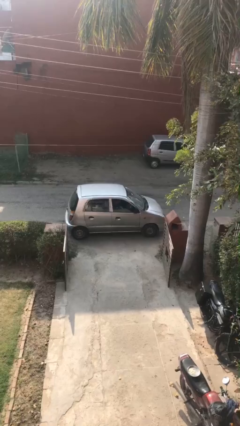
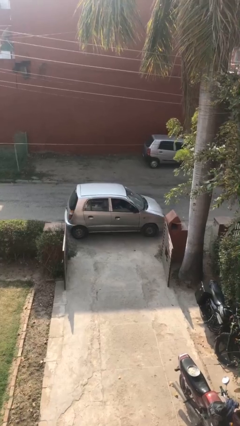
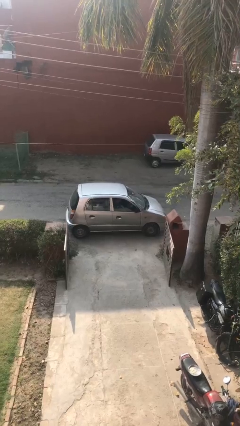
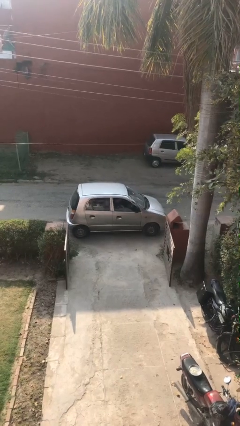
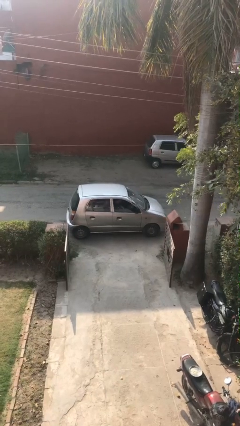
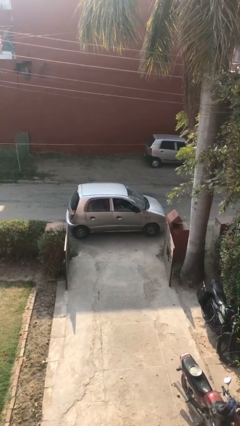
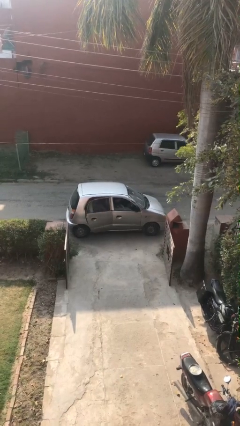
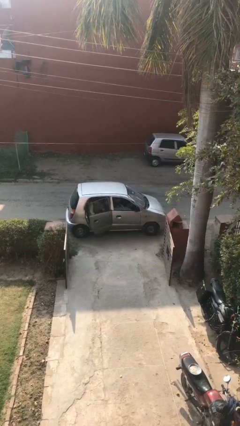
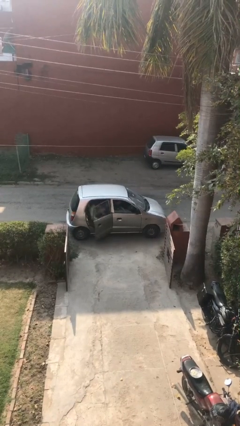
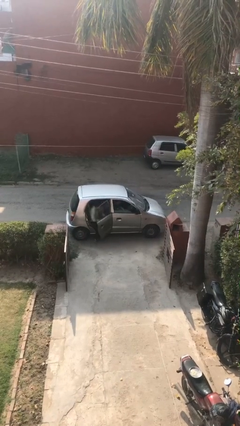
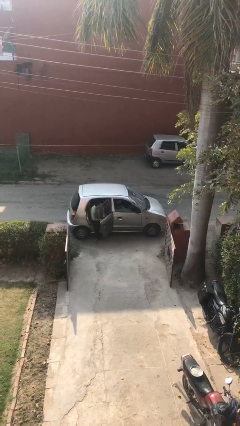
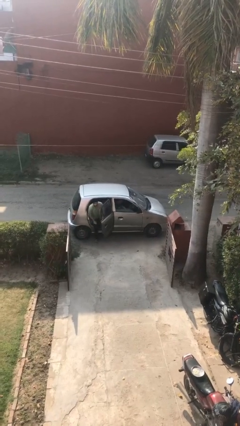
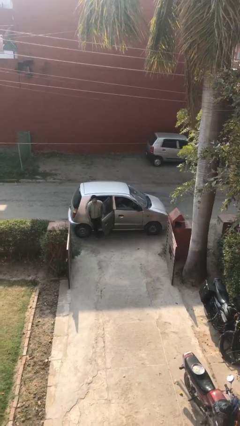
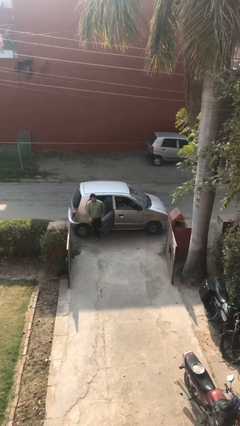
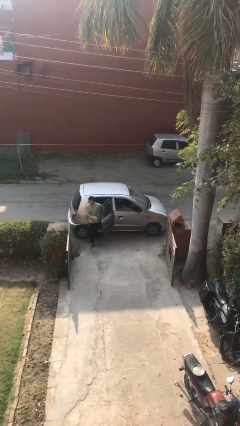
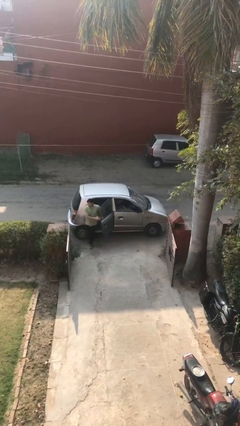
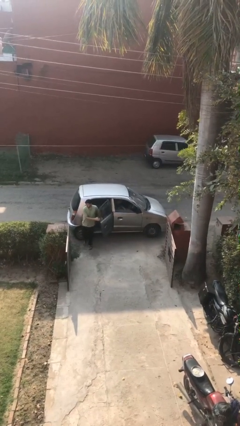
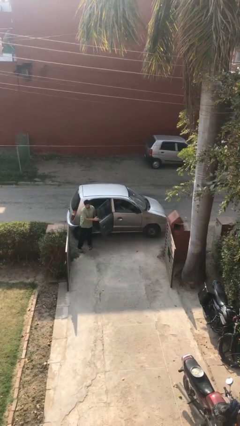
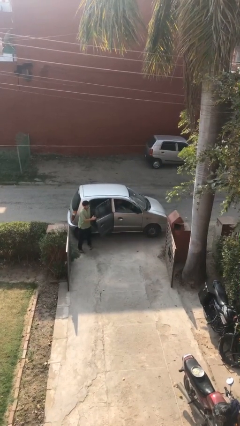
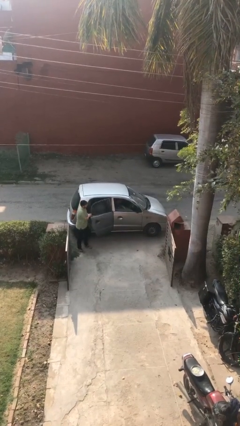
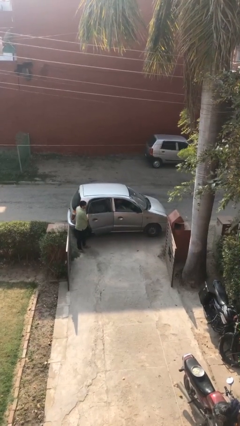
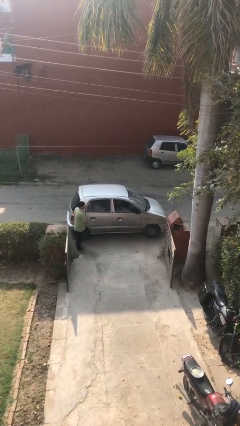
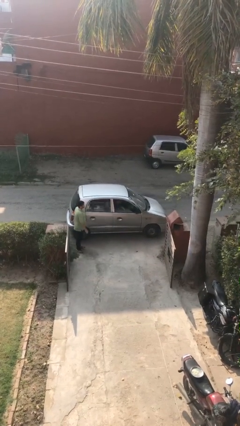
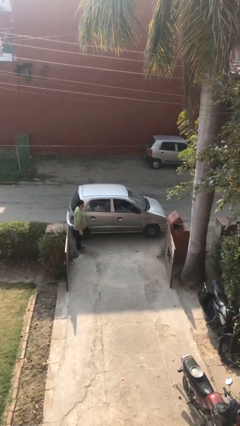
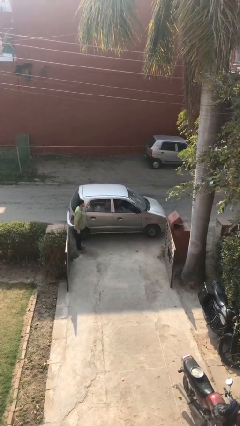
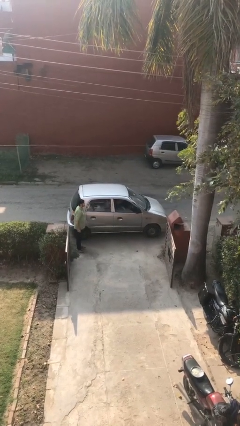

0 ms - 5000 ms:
car drops off person

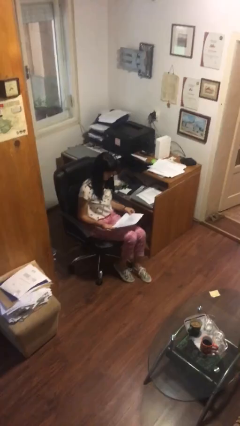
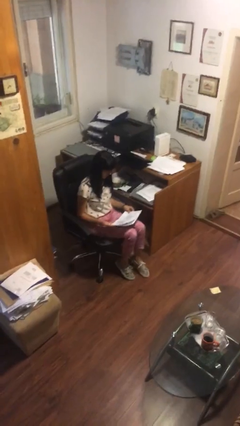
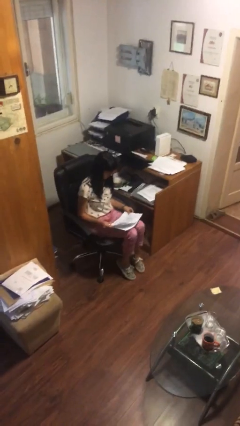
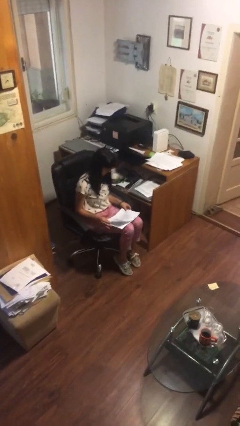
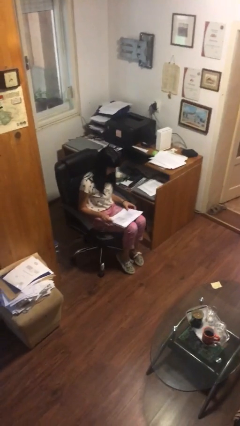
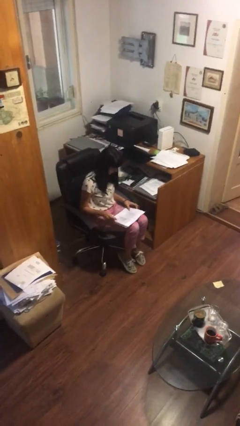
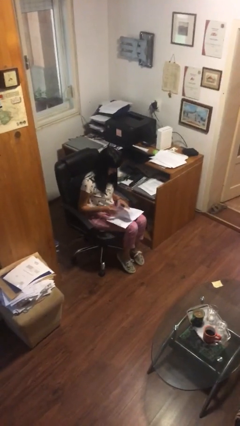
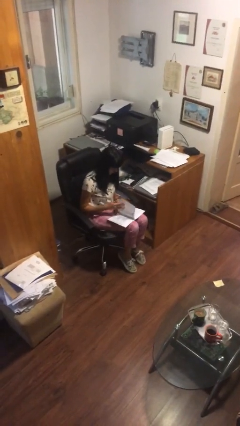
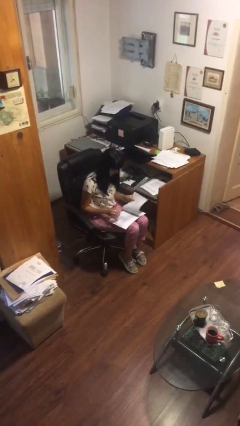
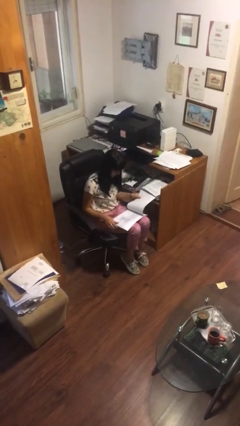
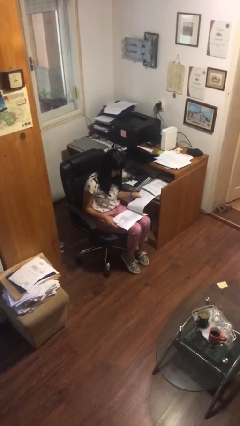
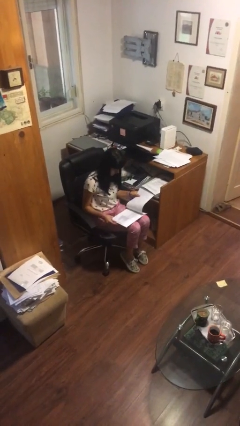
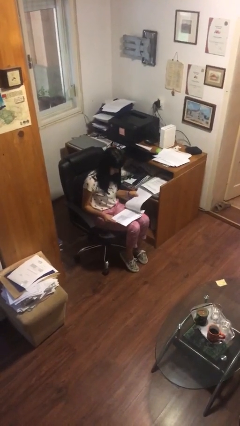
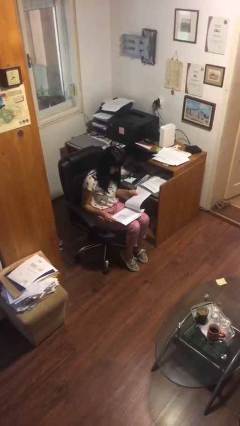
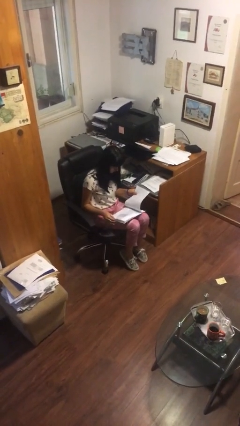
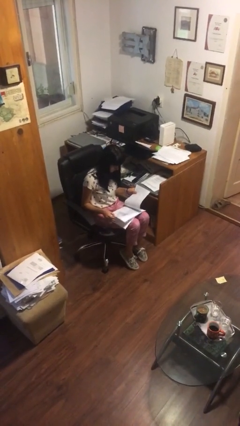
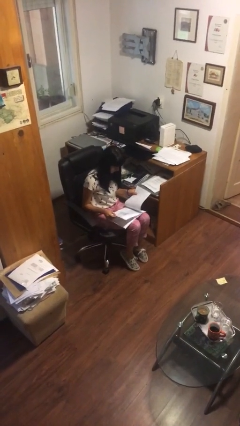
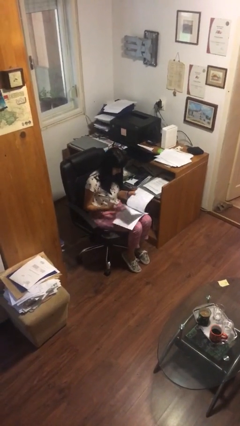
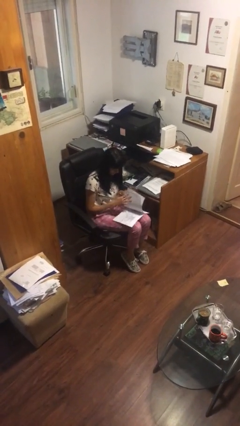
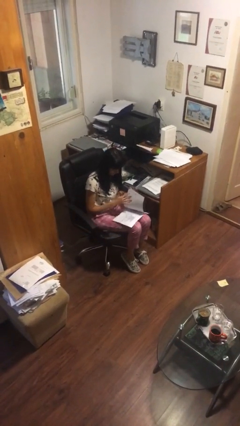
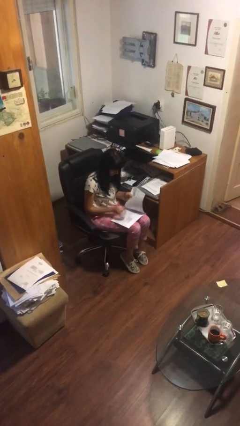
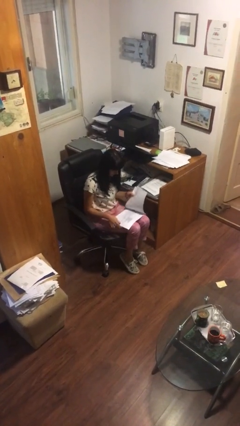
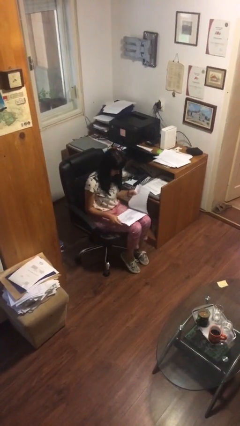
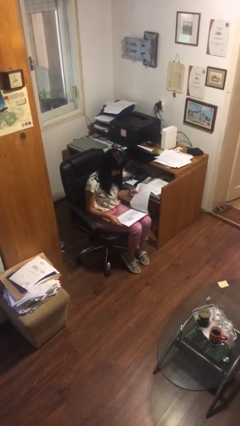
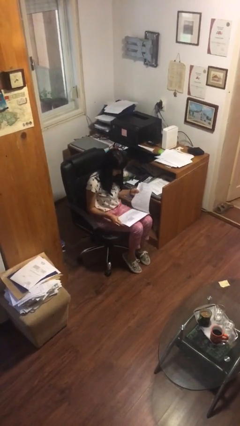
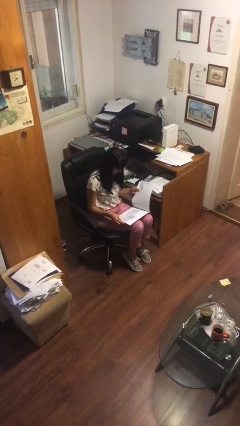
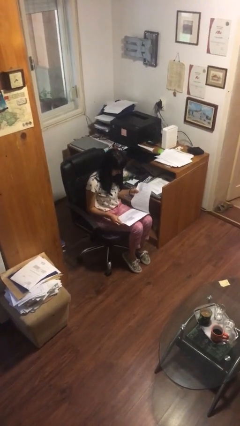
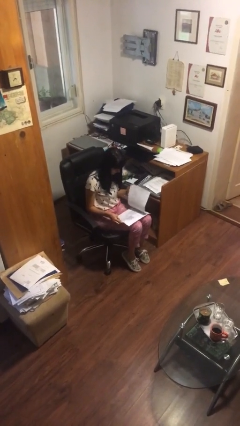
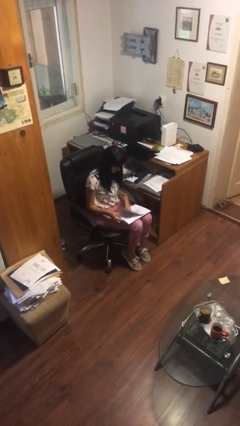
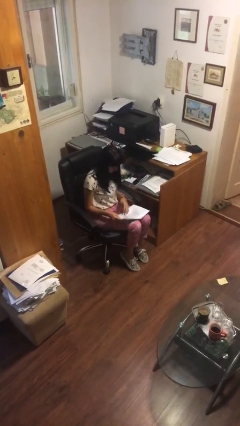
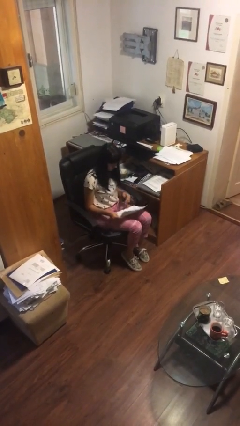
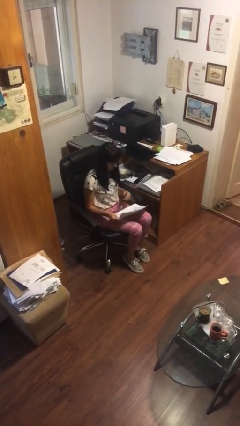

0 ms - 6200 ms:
person reads document

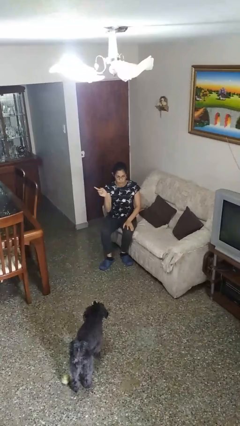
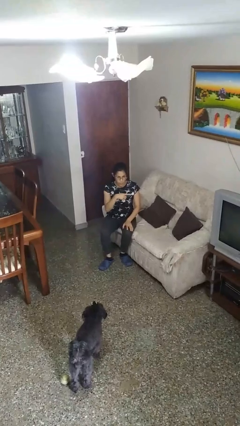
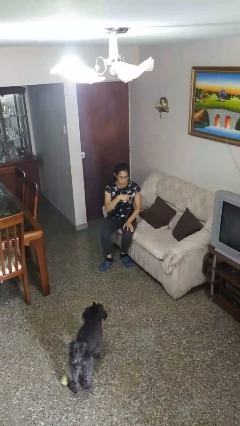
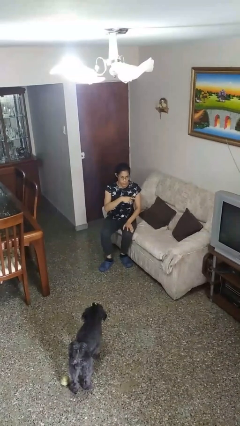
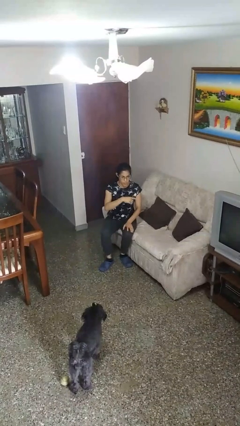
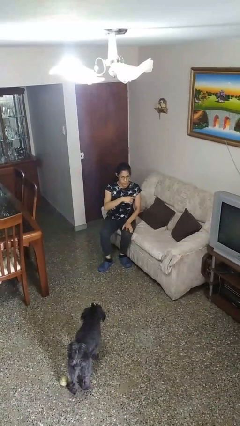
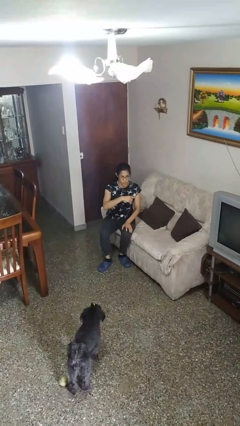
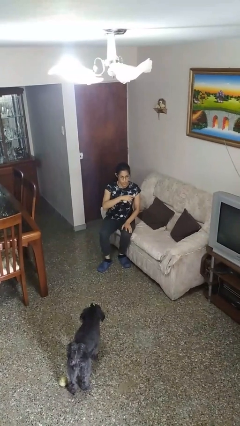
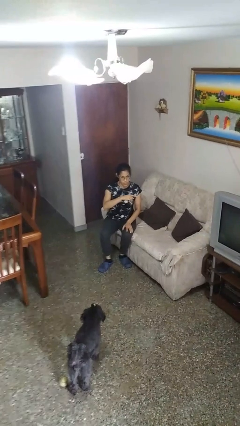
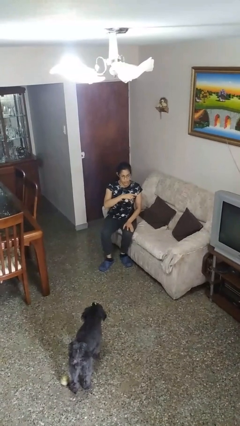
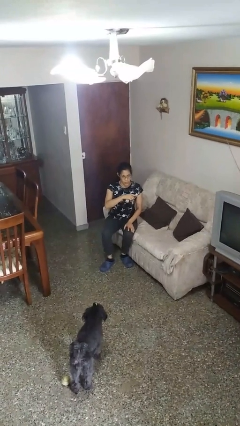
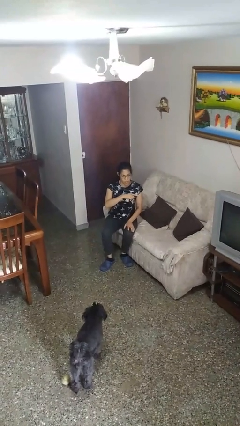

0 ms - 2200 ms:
person gestures swipe left

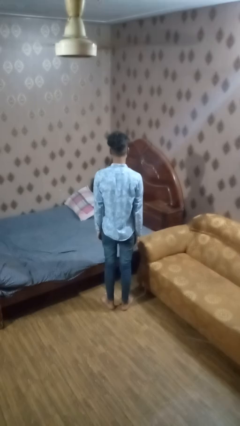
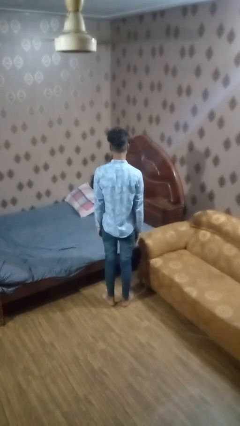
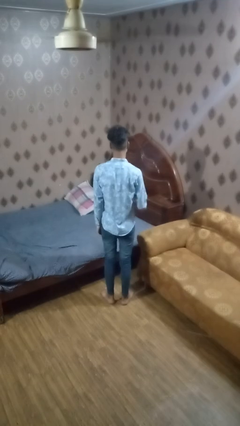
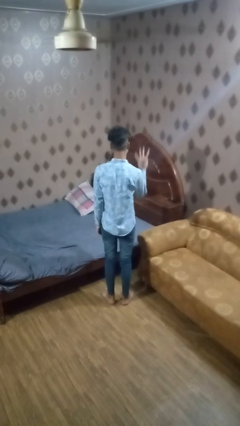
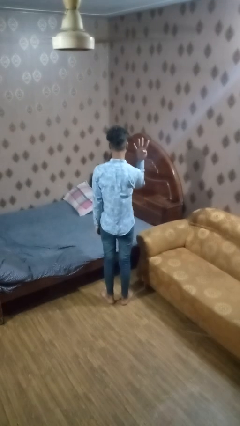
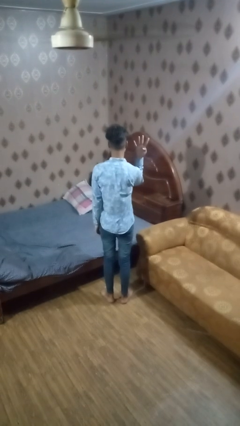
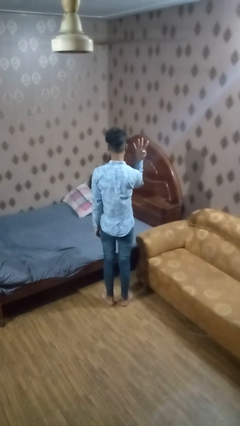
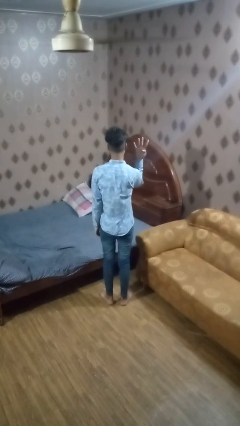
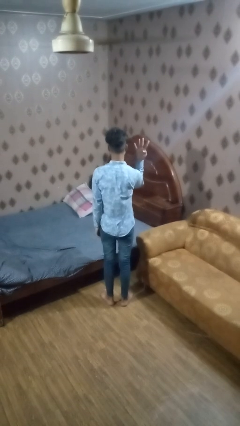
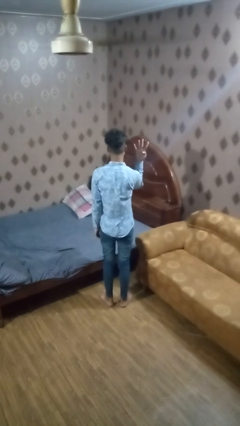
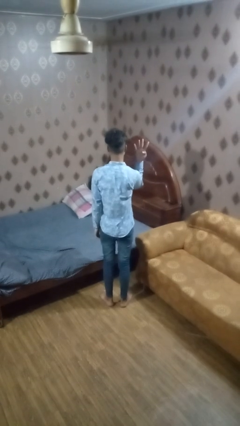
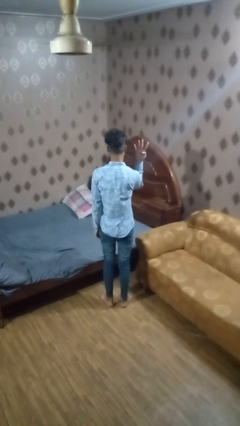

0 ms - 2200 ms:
person gestures number four

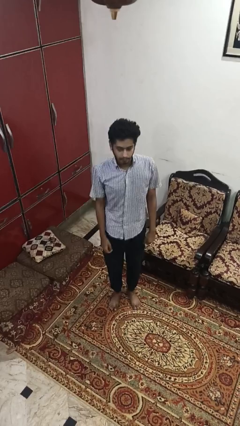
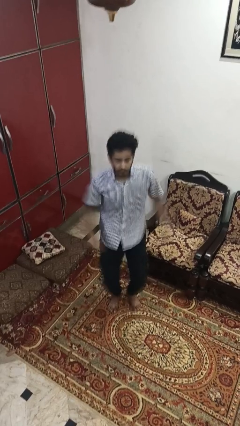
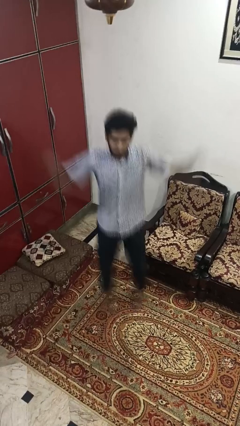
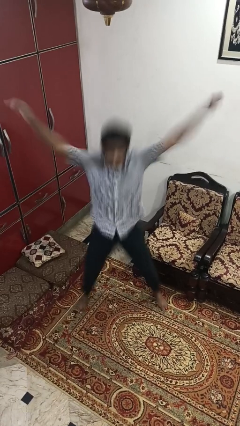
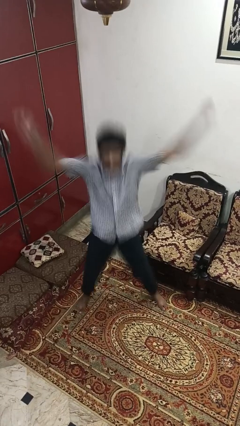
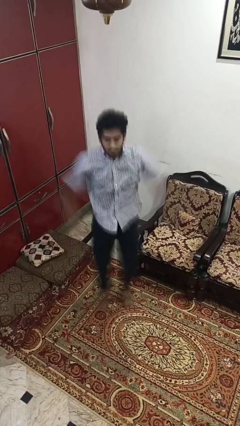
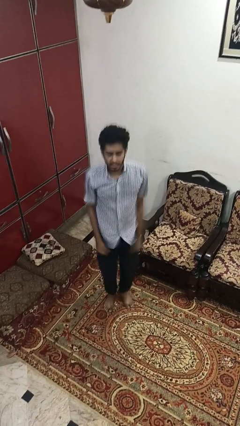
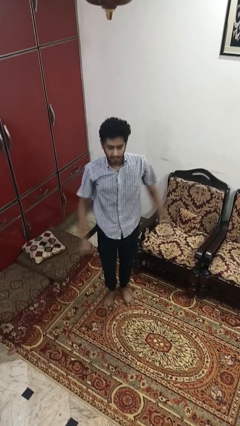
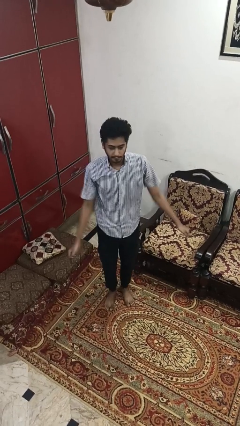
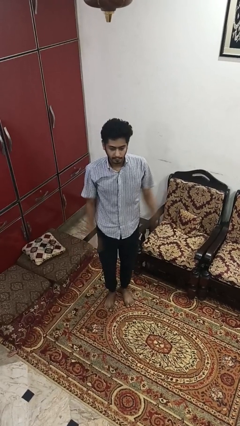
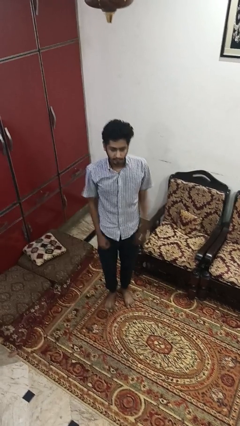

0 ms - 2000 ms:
person exercises with jumping jacks
